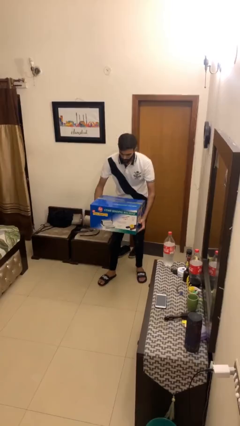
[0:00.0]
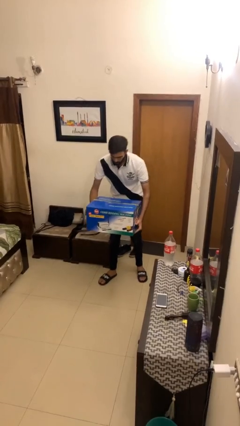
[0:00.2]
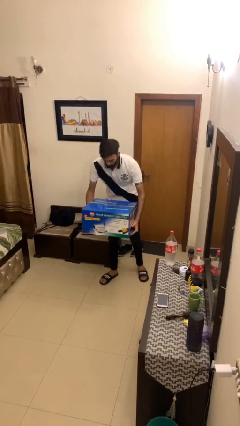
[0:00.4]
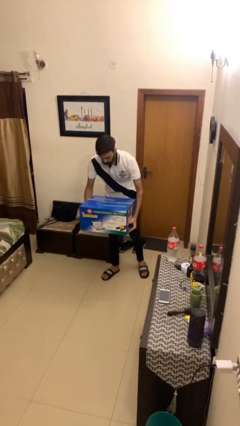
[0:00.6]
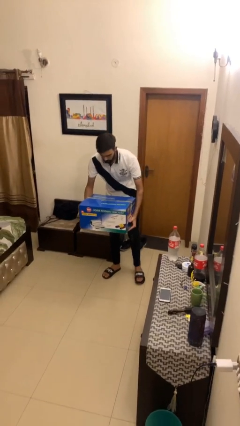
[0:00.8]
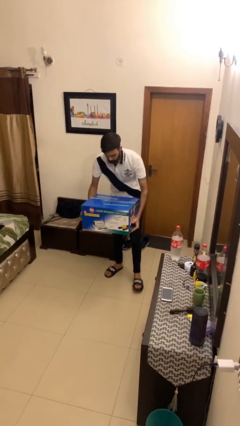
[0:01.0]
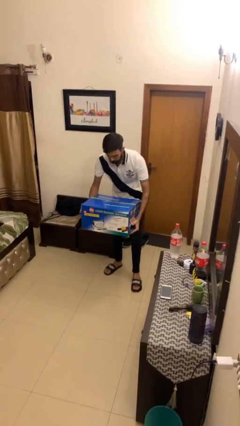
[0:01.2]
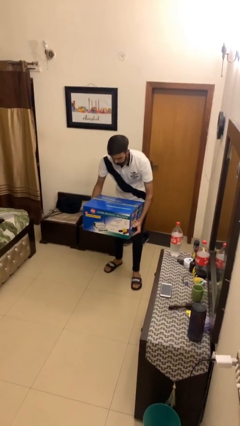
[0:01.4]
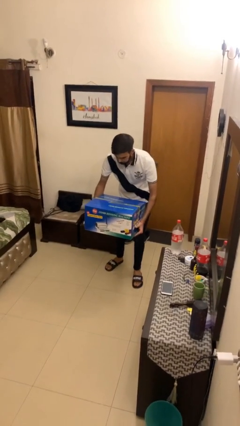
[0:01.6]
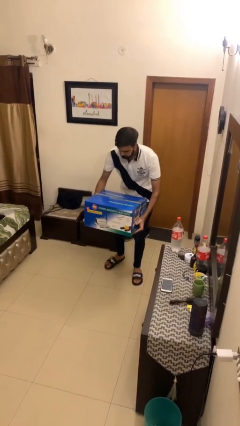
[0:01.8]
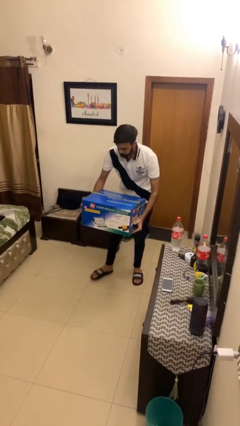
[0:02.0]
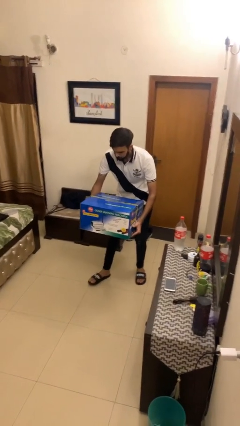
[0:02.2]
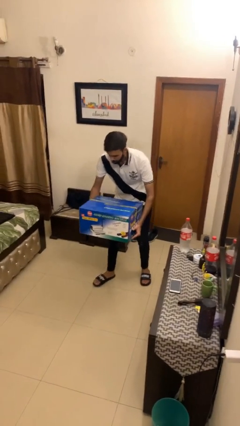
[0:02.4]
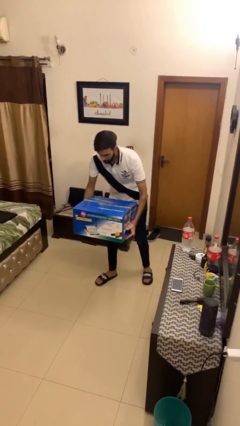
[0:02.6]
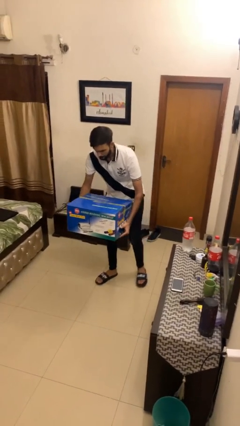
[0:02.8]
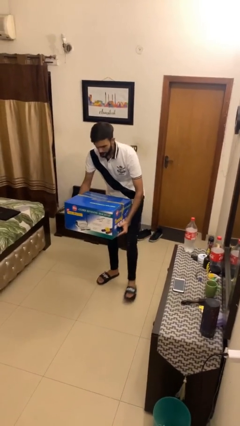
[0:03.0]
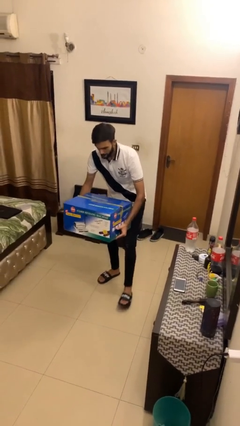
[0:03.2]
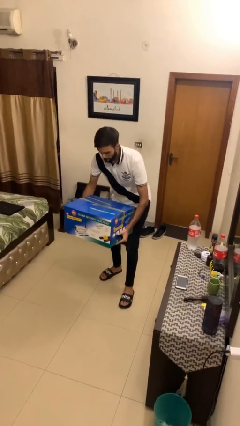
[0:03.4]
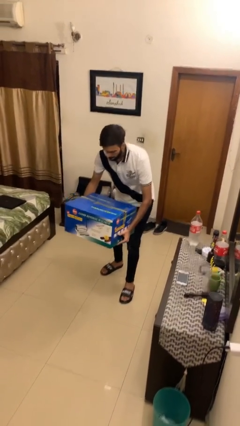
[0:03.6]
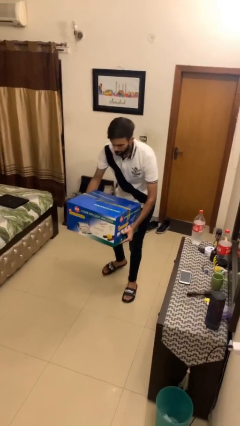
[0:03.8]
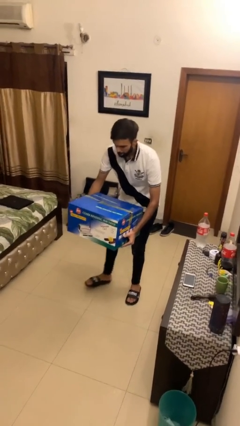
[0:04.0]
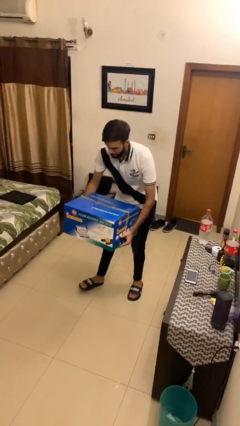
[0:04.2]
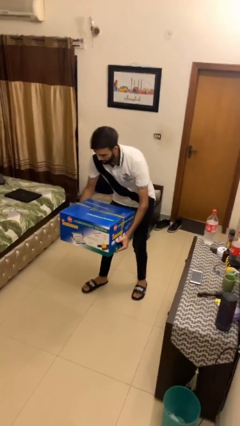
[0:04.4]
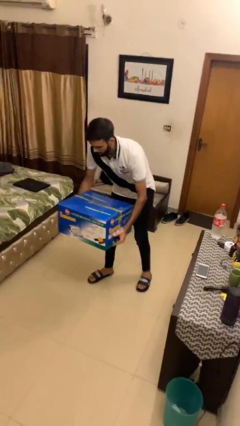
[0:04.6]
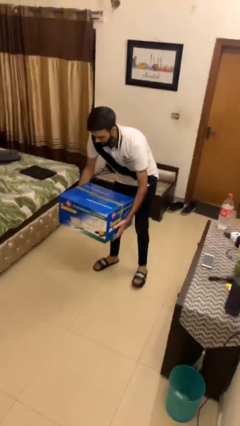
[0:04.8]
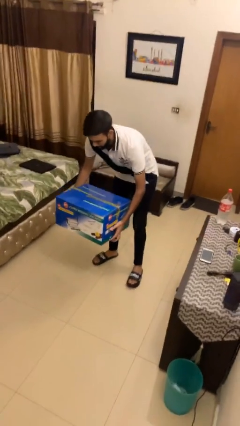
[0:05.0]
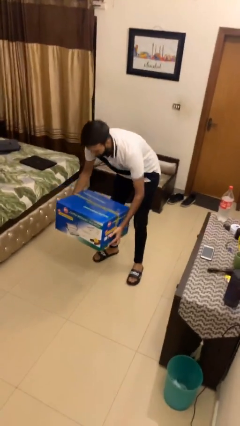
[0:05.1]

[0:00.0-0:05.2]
person carries heavy object

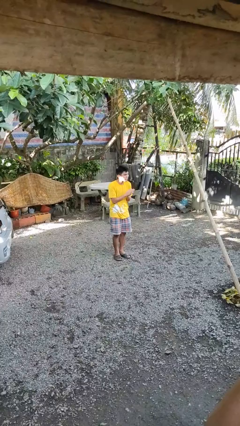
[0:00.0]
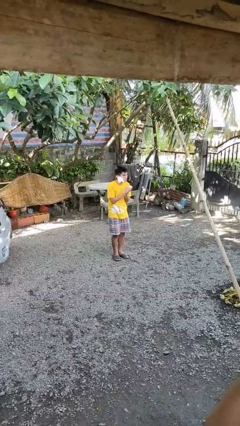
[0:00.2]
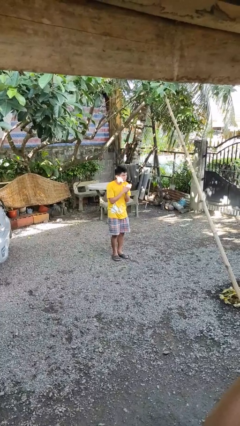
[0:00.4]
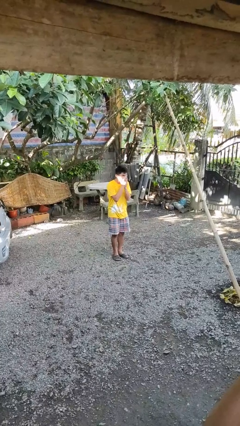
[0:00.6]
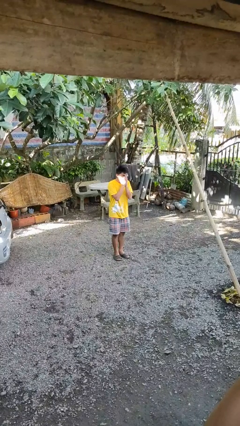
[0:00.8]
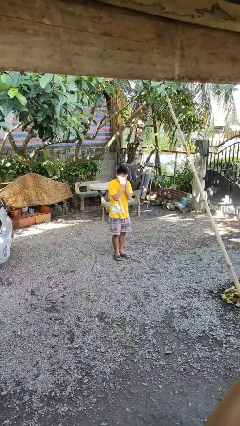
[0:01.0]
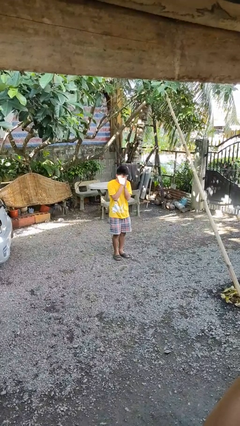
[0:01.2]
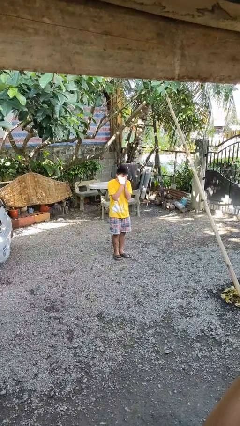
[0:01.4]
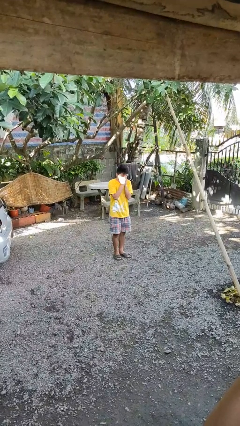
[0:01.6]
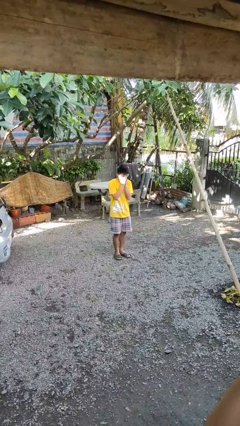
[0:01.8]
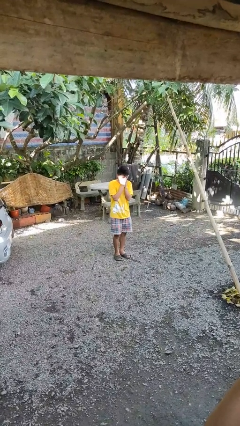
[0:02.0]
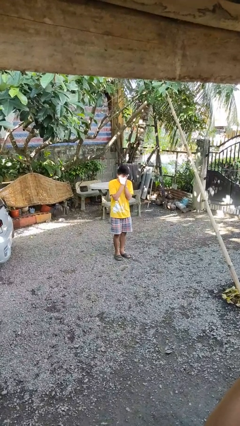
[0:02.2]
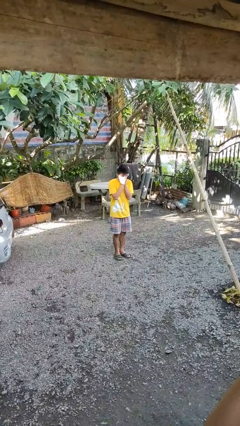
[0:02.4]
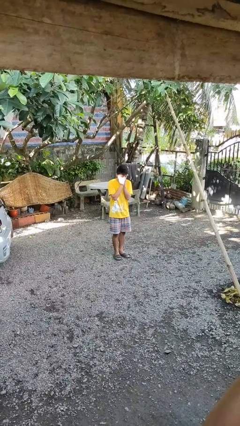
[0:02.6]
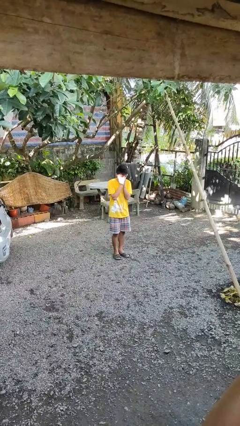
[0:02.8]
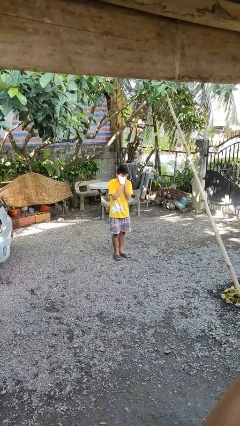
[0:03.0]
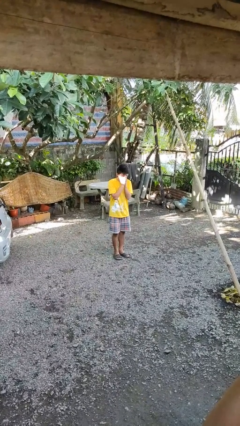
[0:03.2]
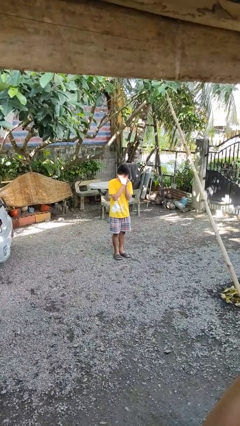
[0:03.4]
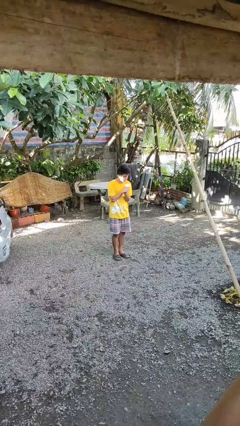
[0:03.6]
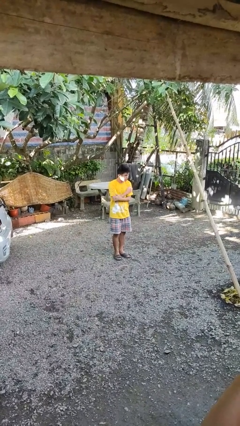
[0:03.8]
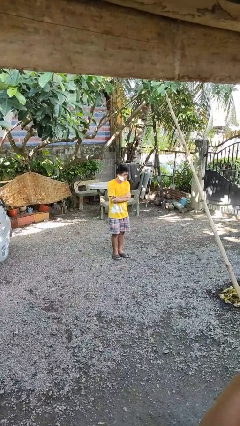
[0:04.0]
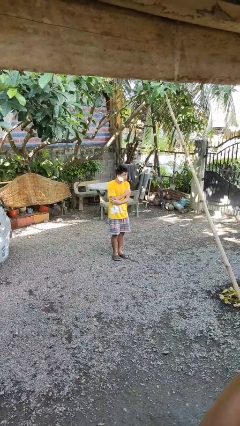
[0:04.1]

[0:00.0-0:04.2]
person blows into hands

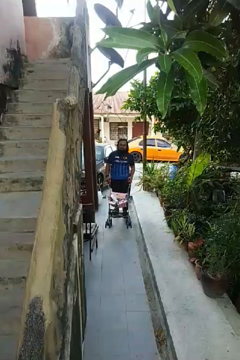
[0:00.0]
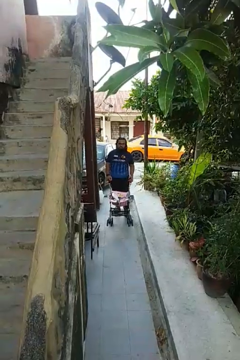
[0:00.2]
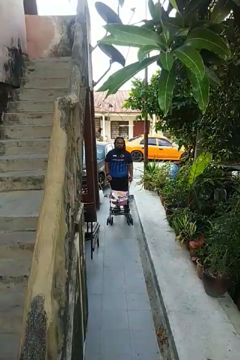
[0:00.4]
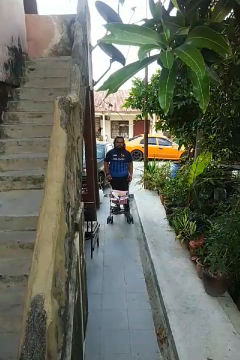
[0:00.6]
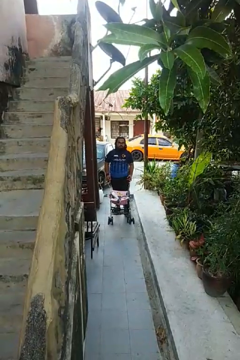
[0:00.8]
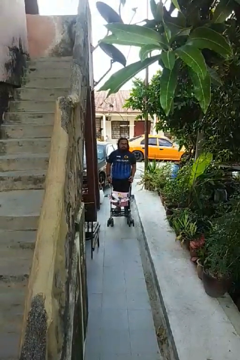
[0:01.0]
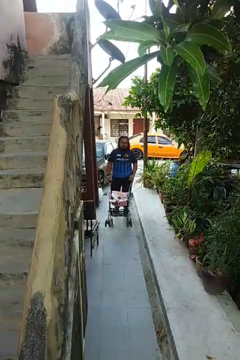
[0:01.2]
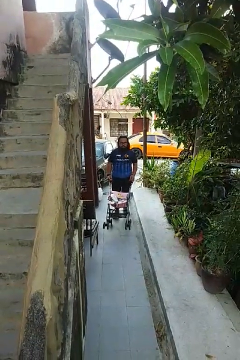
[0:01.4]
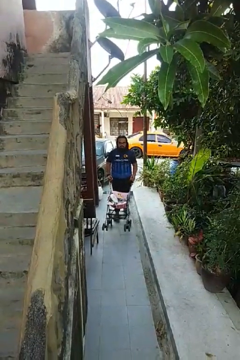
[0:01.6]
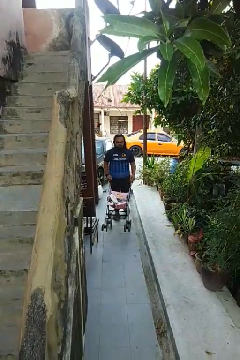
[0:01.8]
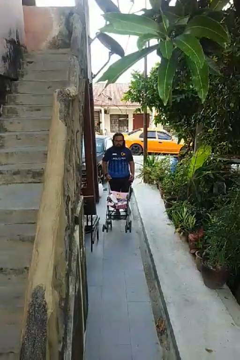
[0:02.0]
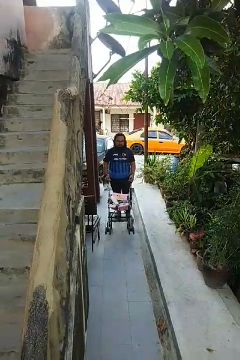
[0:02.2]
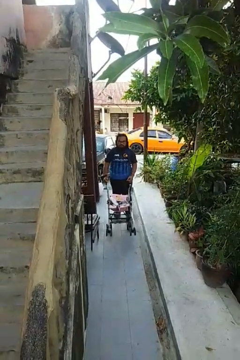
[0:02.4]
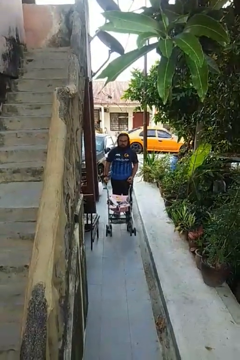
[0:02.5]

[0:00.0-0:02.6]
person pushes wheeled cart

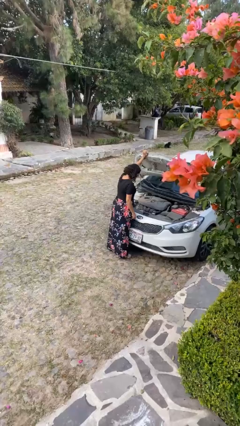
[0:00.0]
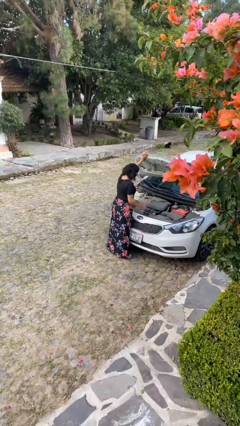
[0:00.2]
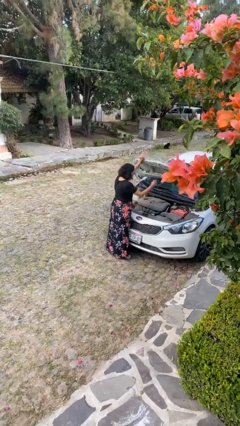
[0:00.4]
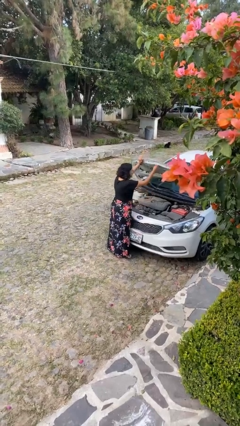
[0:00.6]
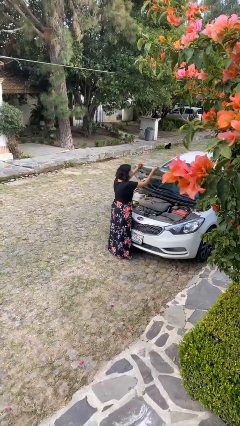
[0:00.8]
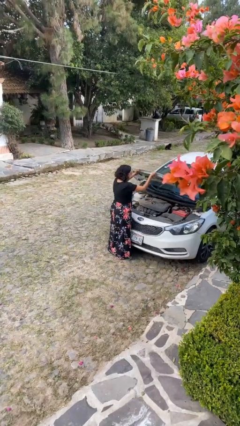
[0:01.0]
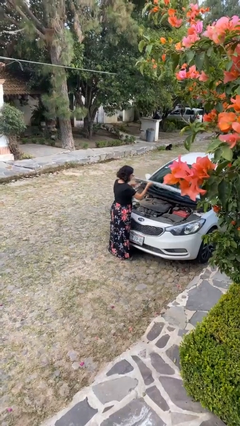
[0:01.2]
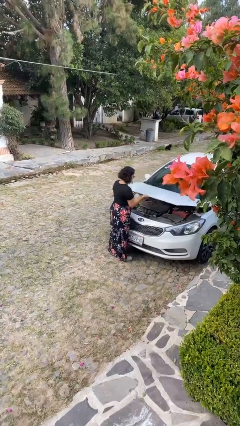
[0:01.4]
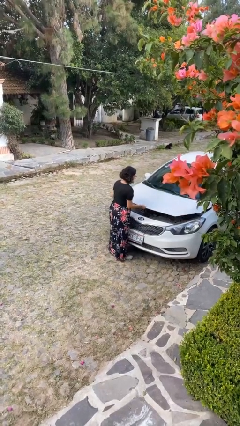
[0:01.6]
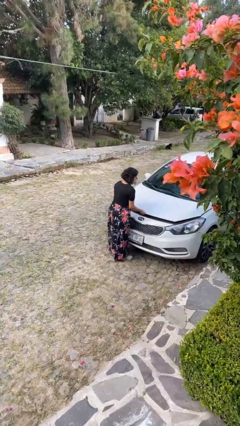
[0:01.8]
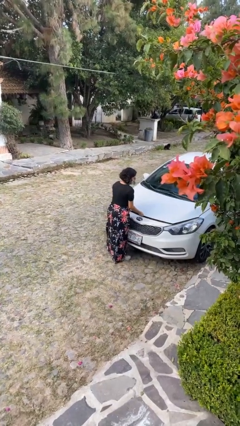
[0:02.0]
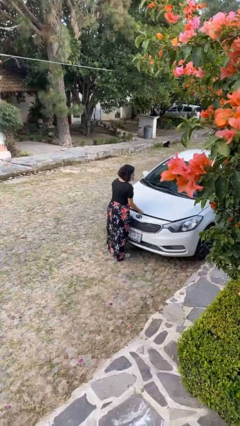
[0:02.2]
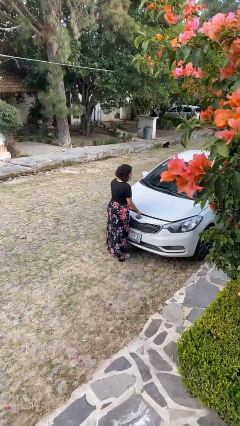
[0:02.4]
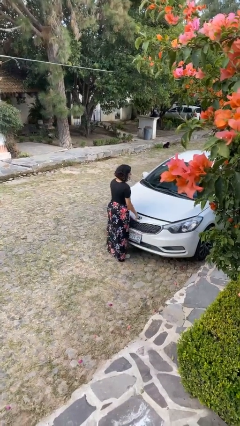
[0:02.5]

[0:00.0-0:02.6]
person closes car hood

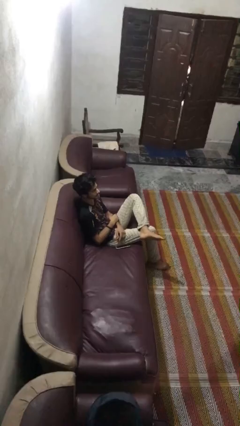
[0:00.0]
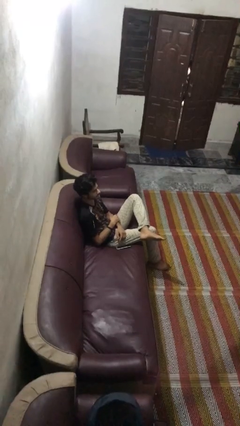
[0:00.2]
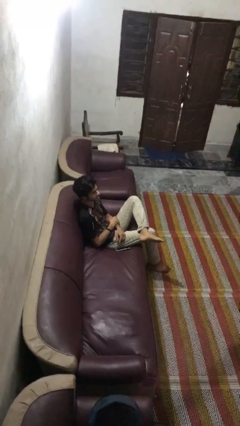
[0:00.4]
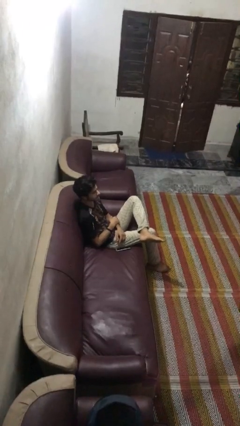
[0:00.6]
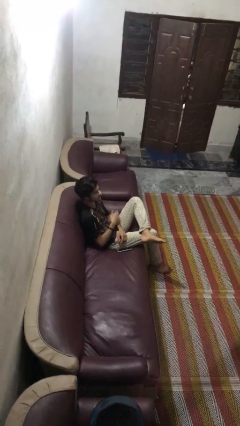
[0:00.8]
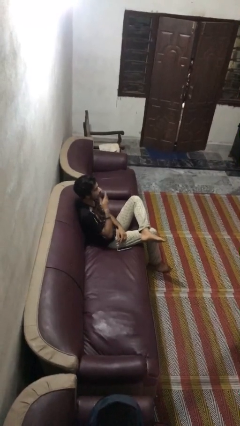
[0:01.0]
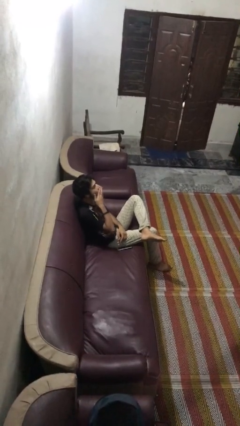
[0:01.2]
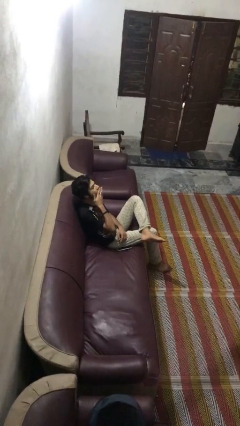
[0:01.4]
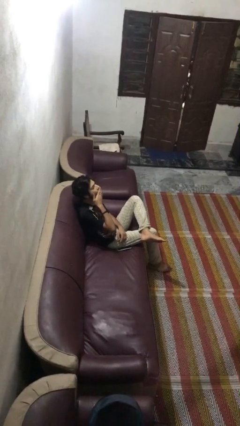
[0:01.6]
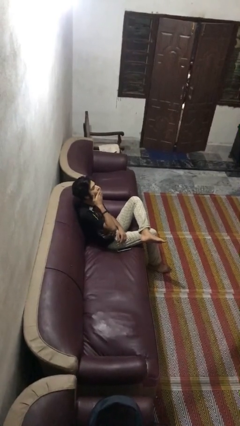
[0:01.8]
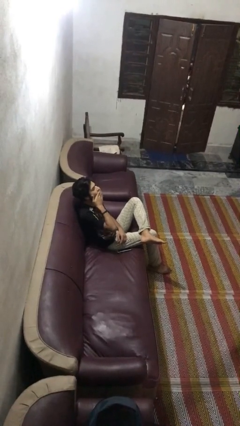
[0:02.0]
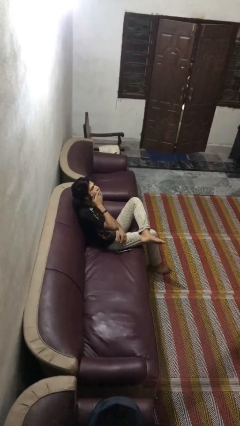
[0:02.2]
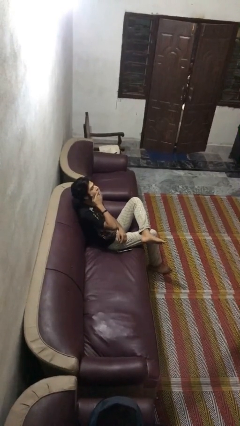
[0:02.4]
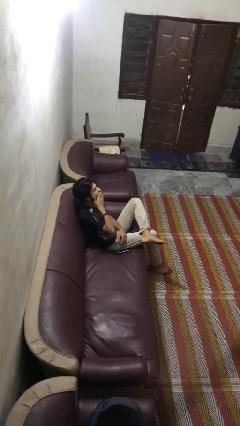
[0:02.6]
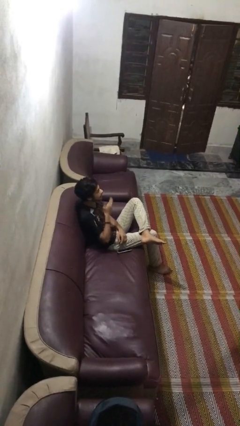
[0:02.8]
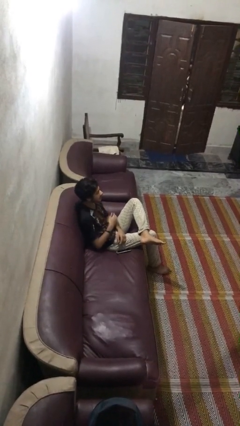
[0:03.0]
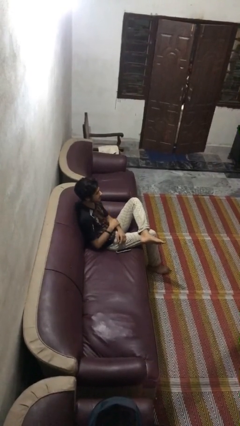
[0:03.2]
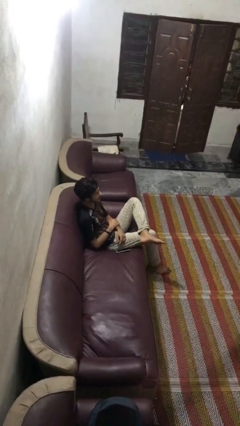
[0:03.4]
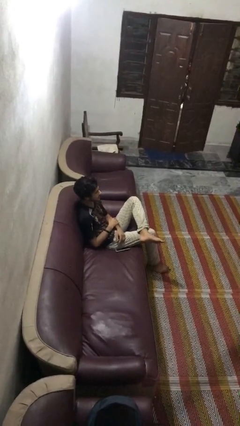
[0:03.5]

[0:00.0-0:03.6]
person yawns
